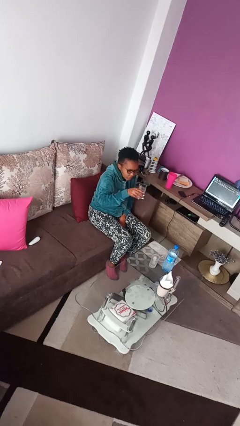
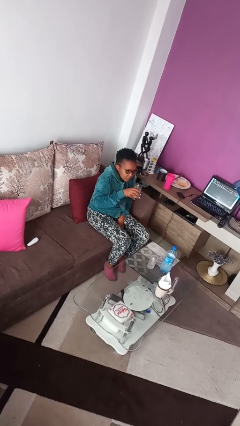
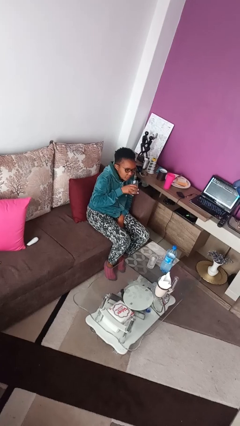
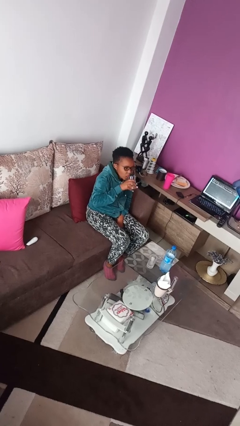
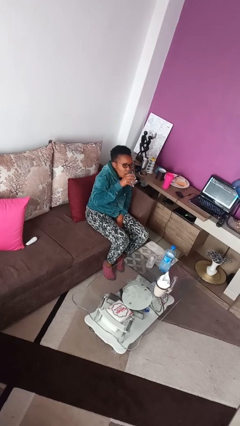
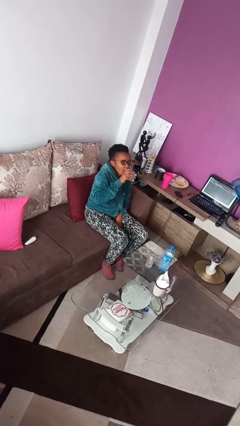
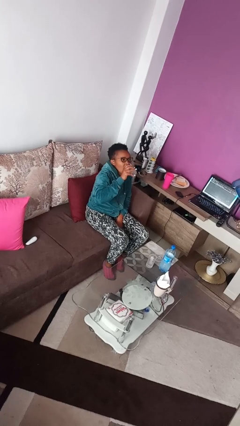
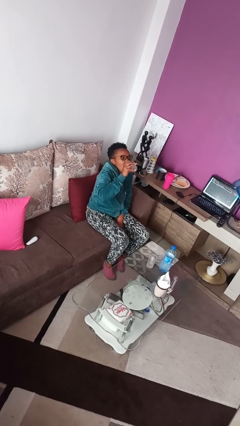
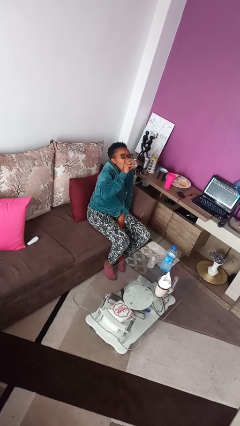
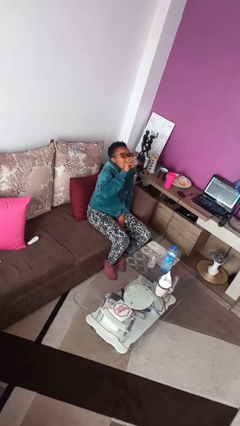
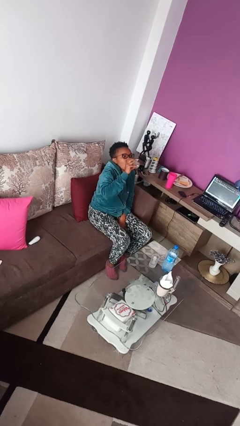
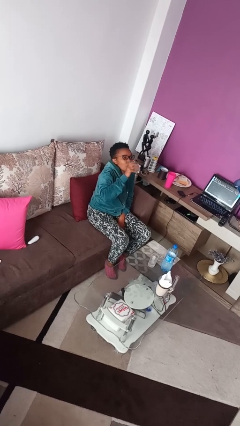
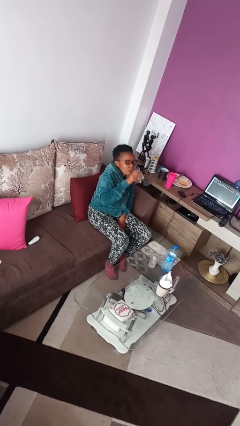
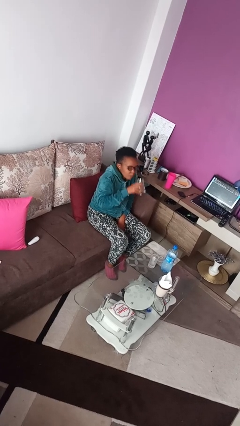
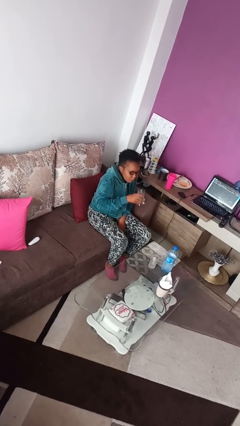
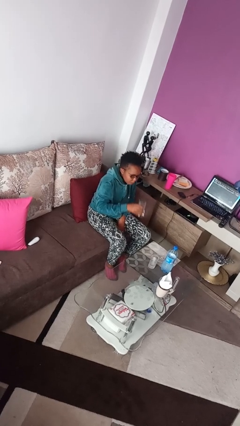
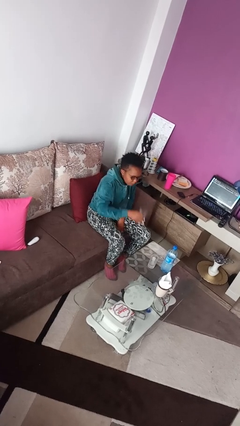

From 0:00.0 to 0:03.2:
person drinks from shotglass

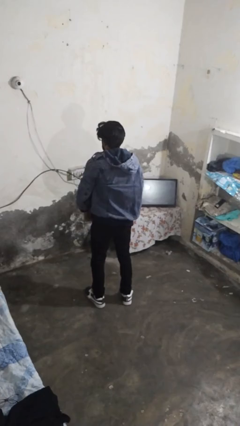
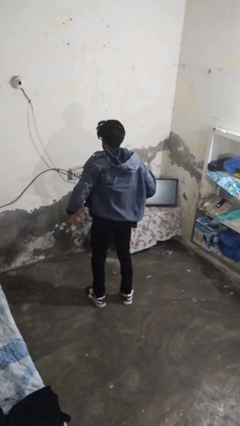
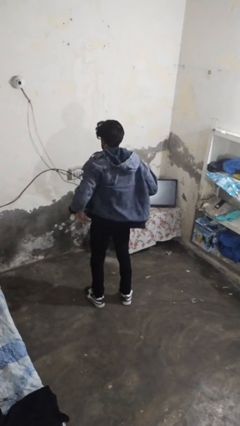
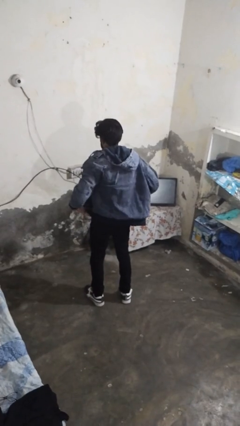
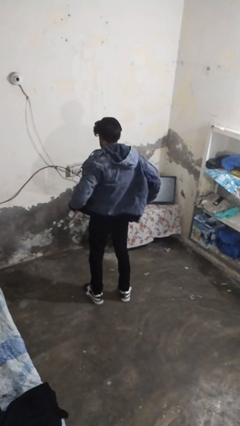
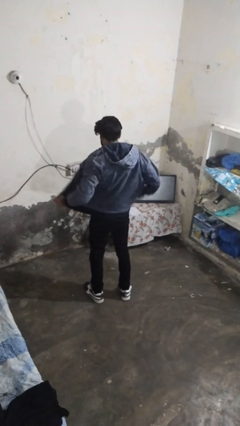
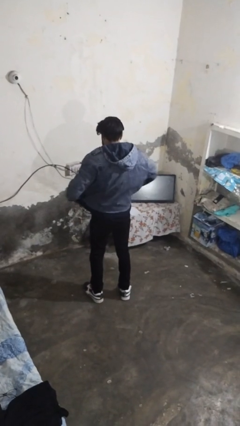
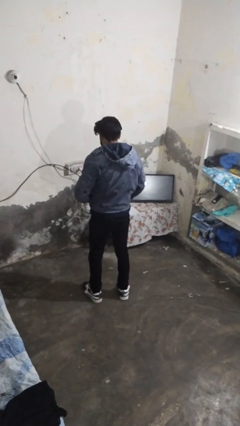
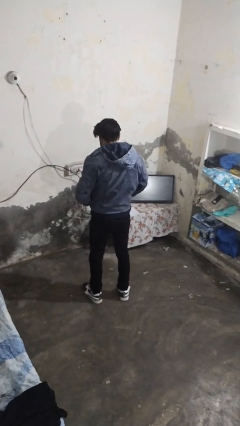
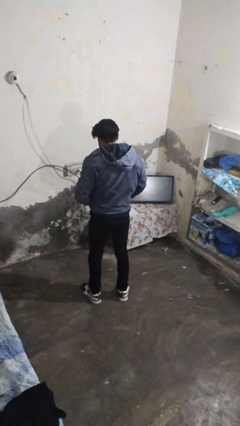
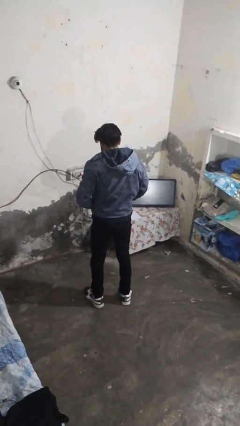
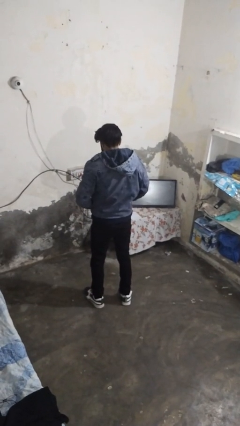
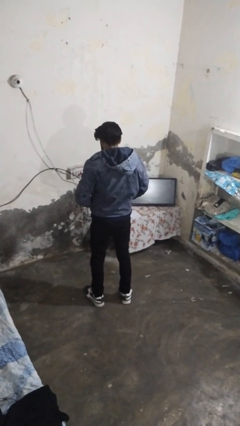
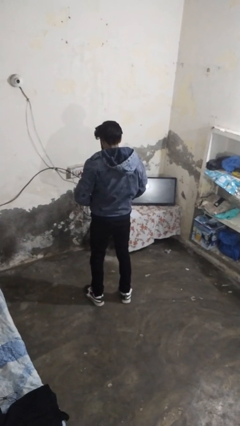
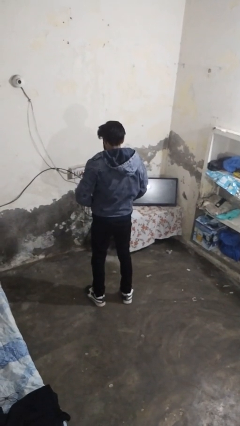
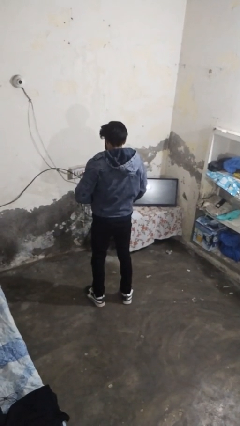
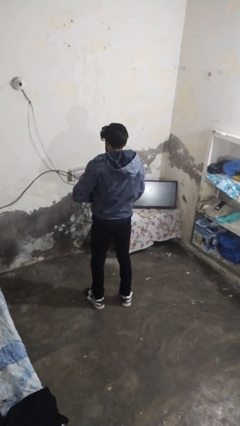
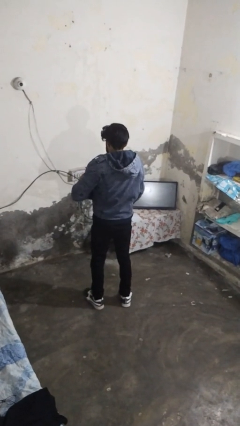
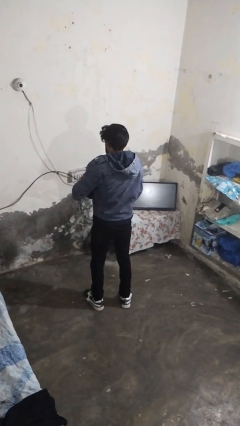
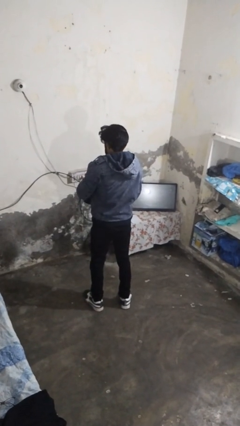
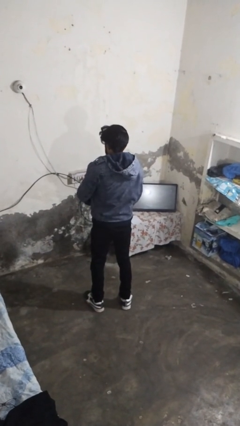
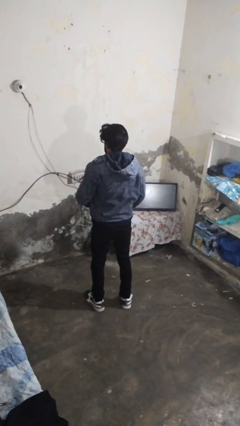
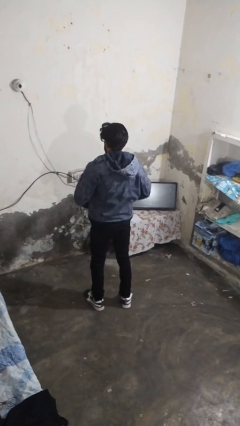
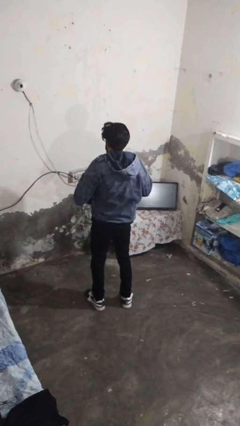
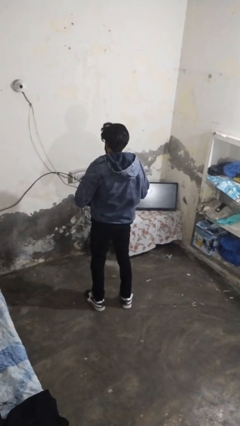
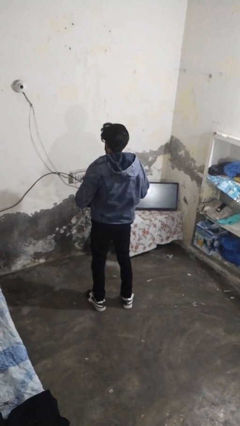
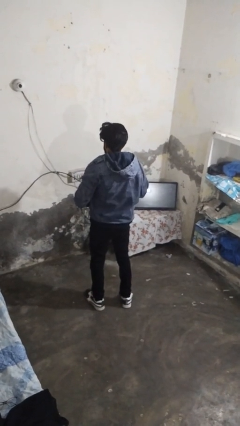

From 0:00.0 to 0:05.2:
person zips up jacket

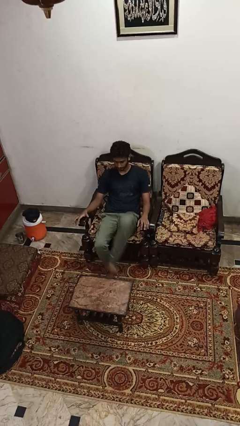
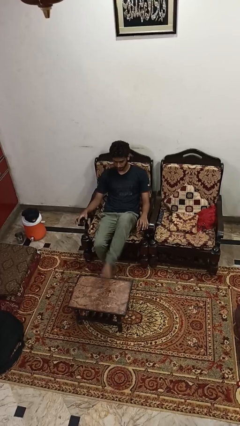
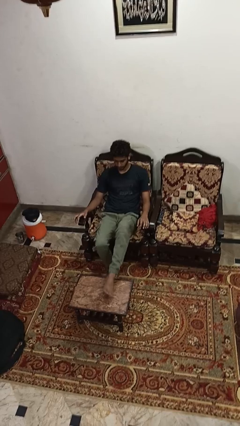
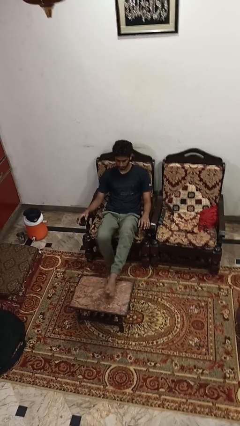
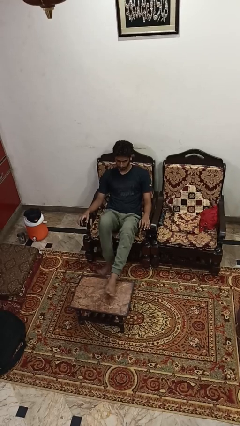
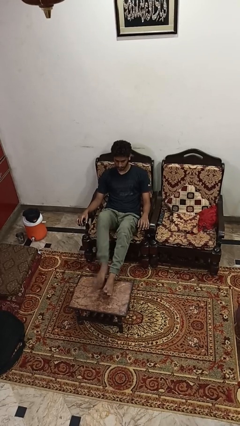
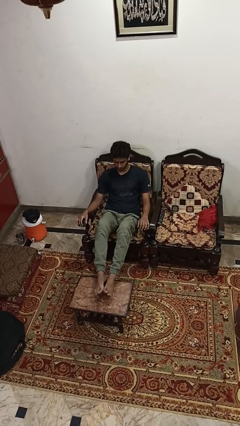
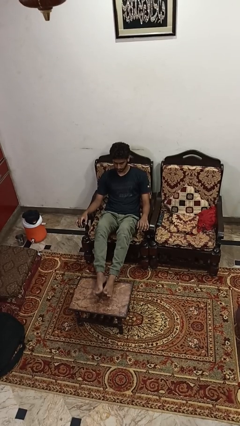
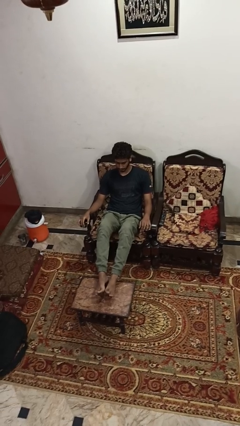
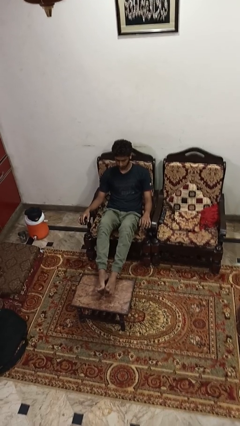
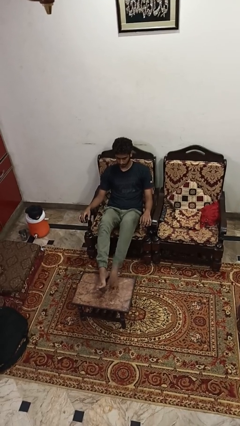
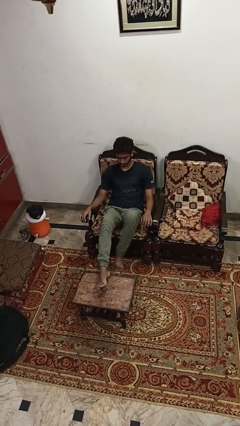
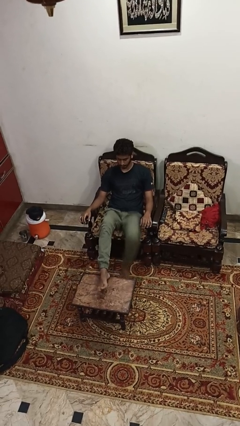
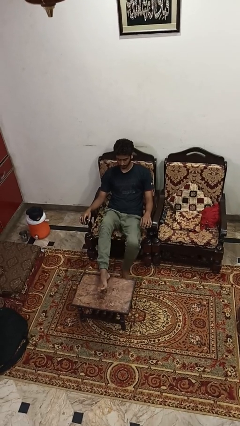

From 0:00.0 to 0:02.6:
person puts feet up

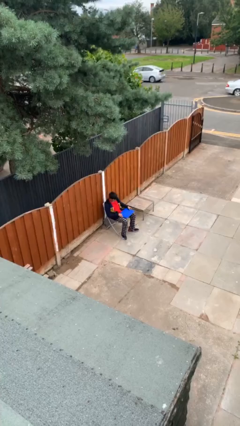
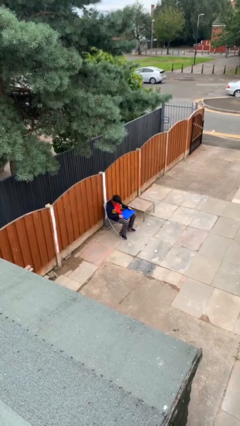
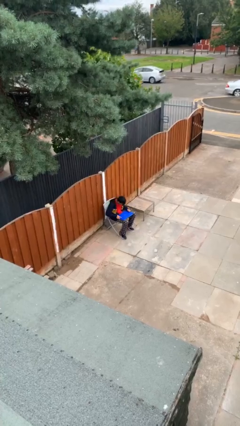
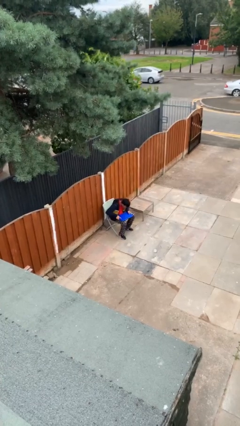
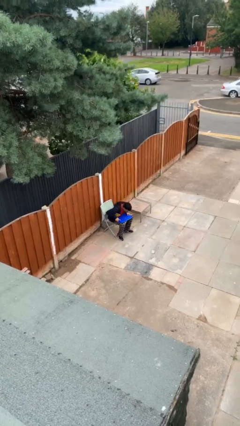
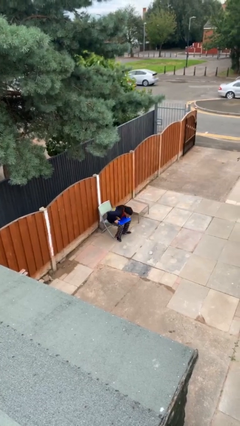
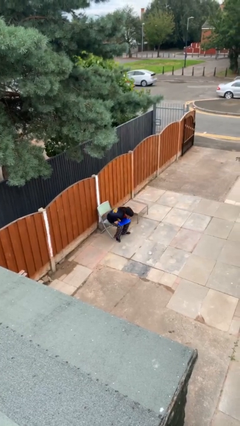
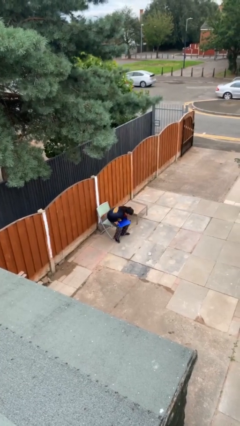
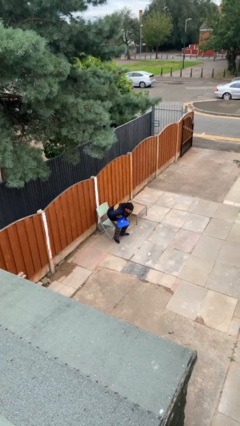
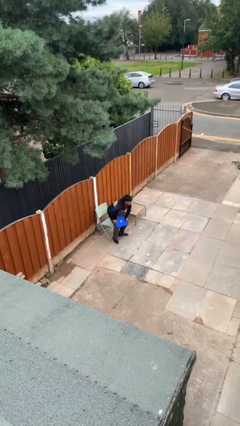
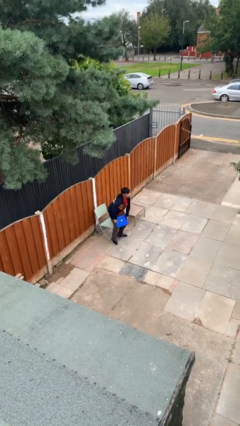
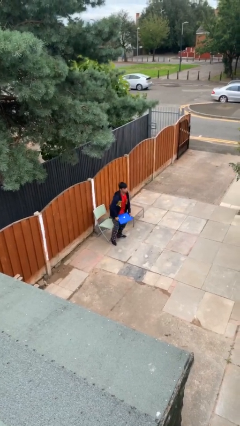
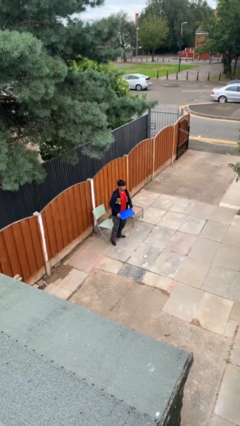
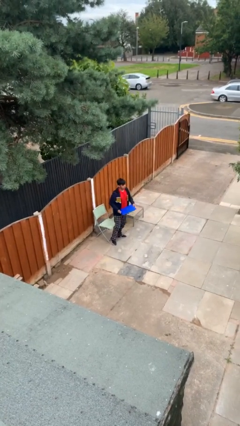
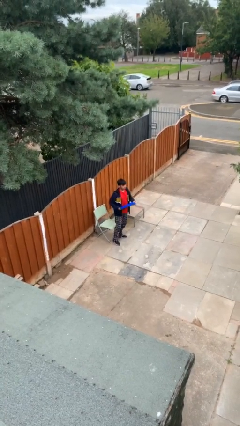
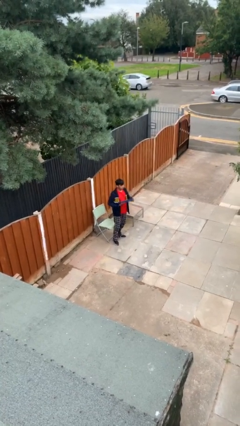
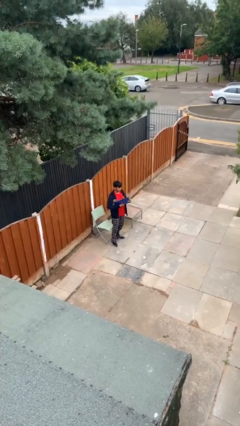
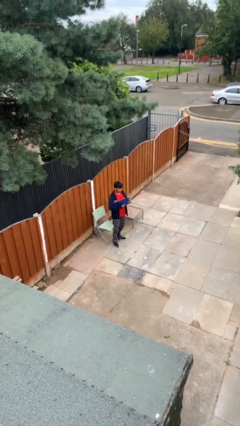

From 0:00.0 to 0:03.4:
person stands up

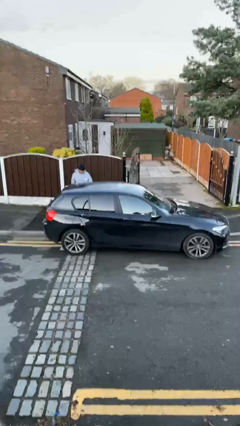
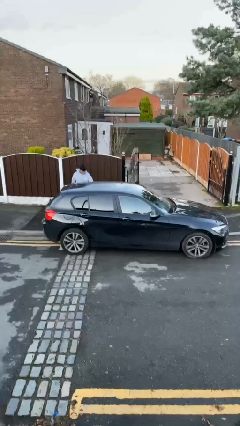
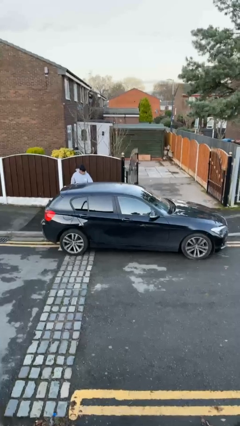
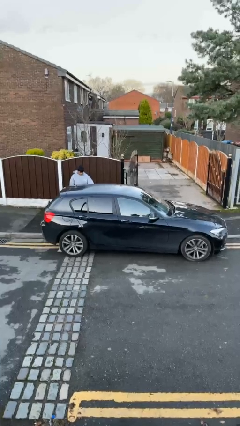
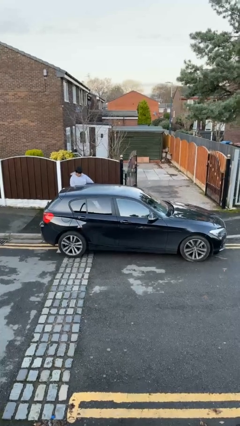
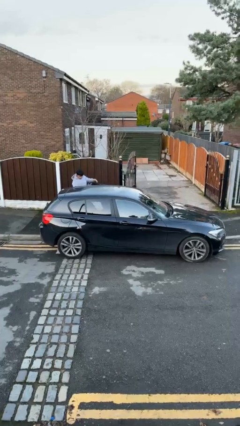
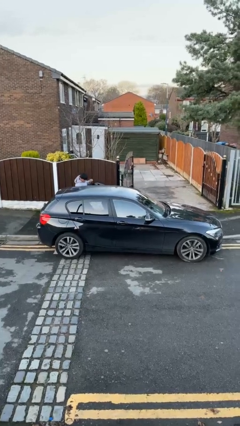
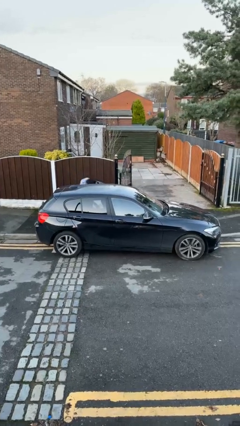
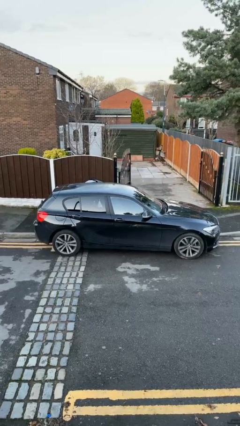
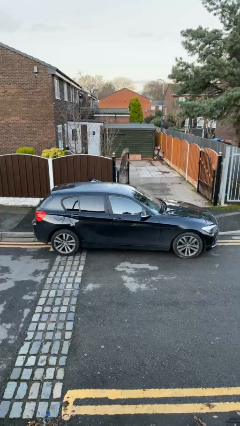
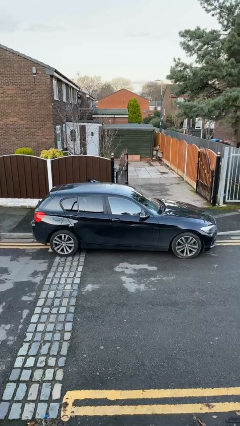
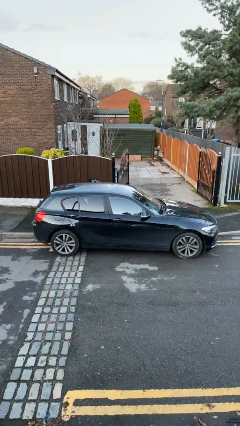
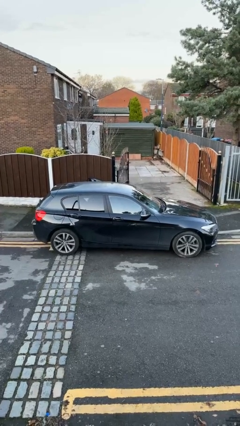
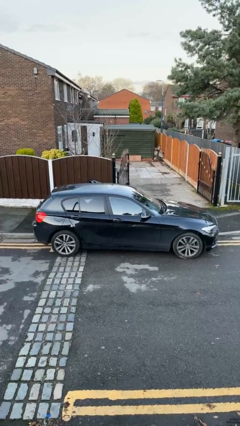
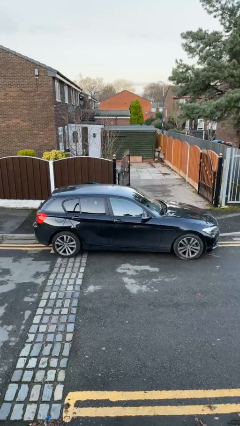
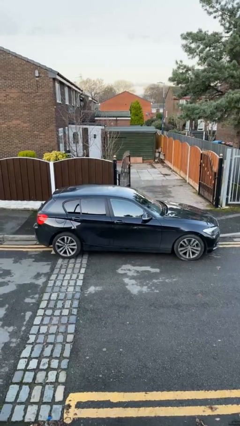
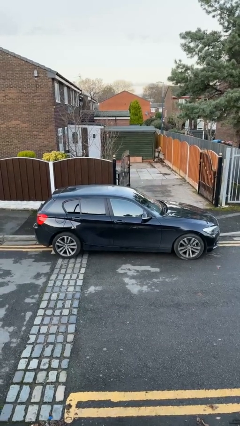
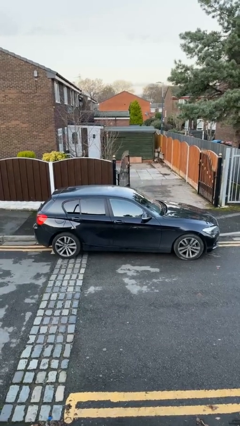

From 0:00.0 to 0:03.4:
car picks up person
